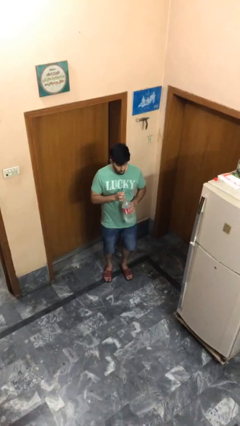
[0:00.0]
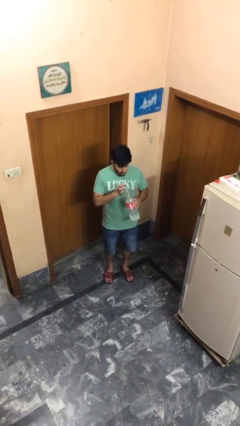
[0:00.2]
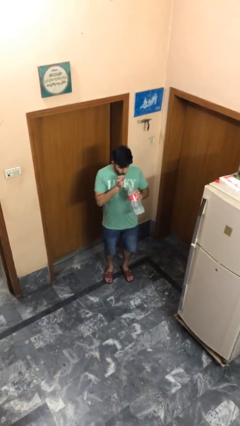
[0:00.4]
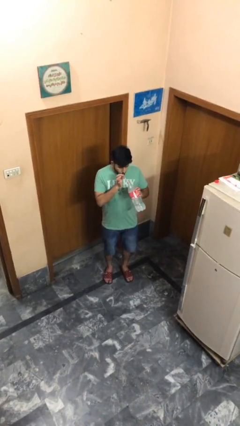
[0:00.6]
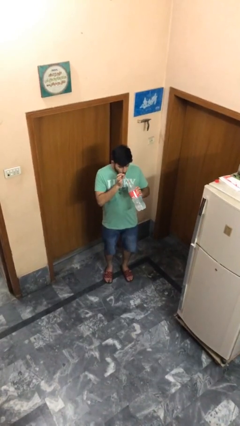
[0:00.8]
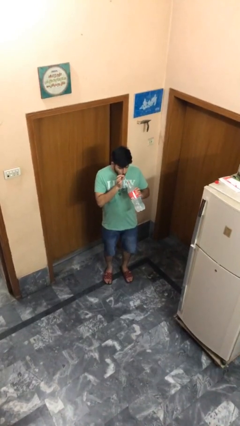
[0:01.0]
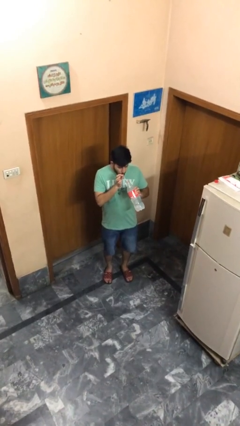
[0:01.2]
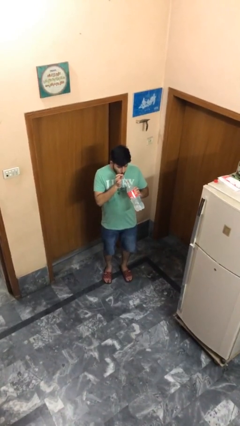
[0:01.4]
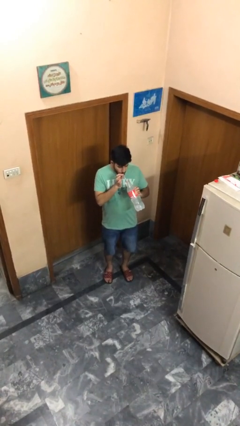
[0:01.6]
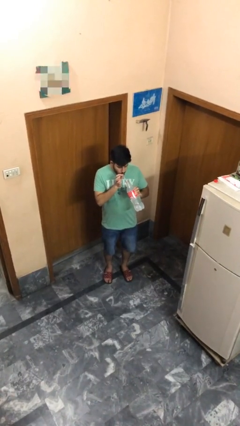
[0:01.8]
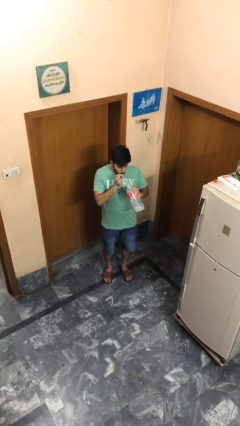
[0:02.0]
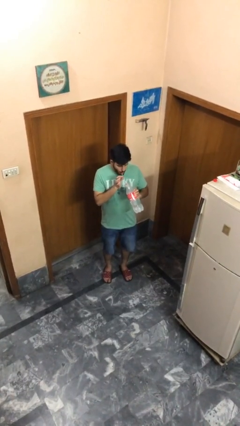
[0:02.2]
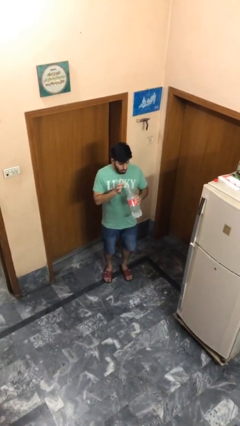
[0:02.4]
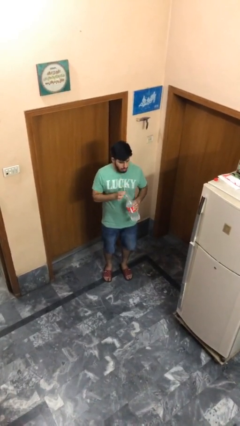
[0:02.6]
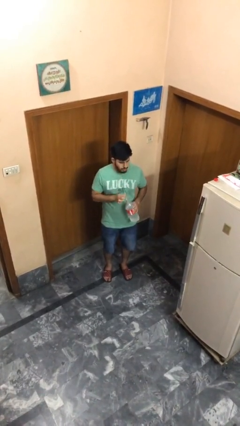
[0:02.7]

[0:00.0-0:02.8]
person drinks from straw

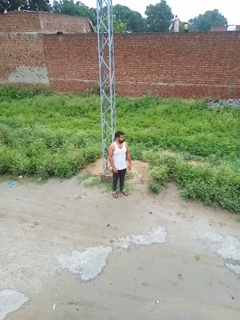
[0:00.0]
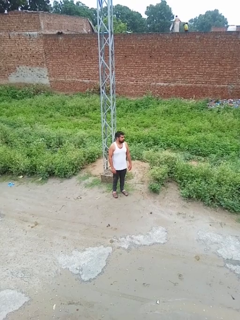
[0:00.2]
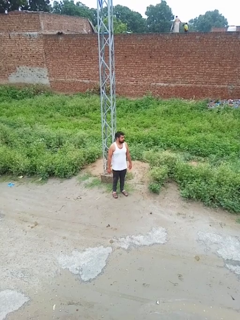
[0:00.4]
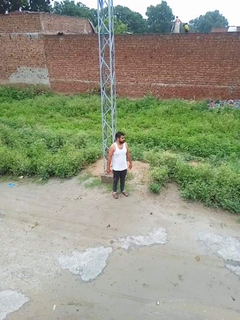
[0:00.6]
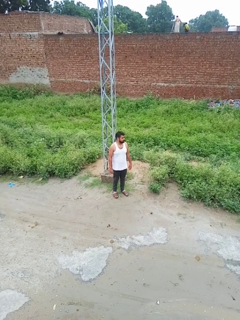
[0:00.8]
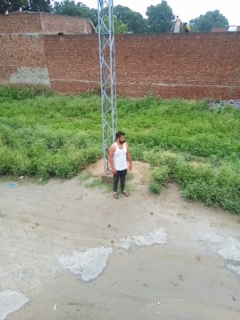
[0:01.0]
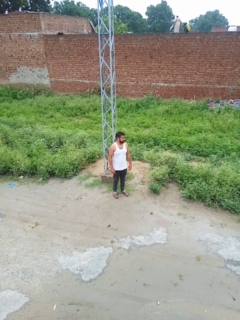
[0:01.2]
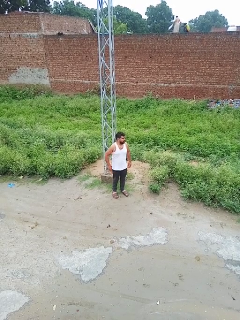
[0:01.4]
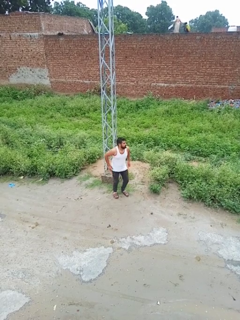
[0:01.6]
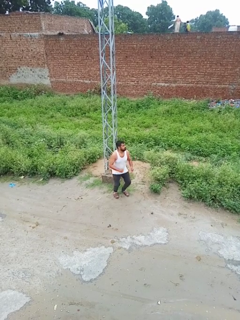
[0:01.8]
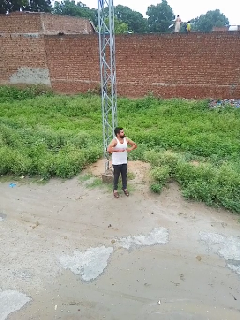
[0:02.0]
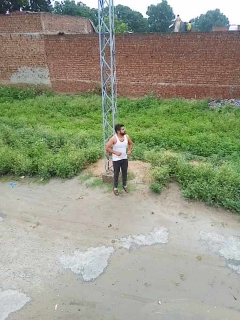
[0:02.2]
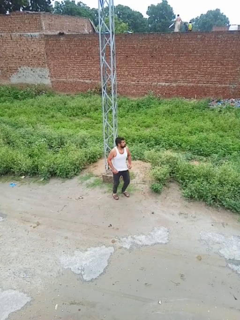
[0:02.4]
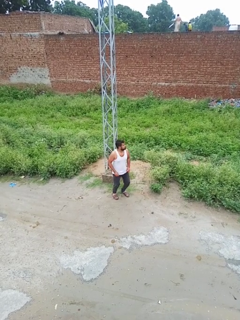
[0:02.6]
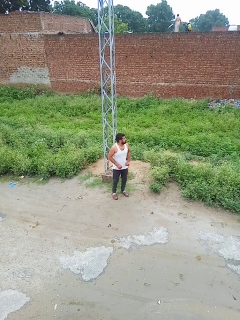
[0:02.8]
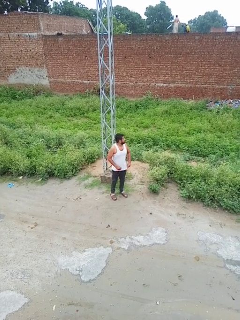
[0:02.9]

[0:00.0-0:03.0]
person jumps

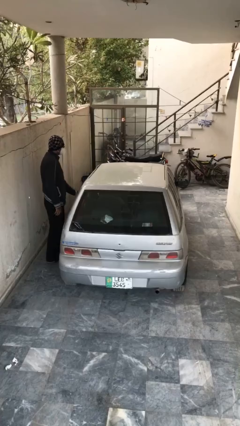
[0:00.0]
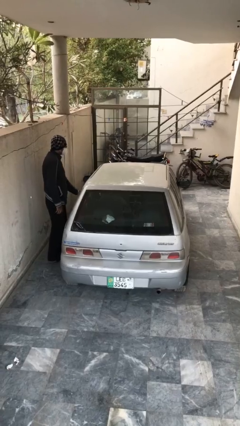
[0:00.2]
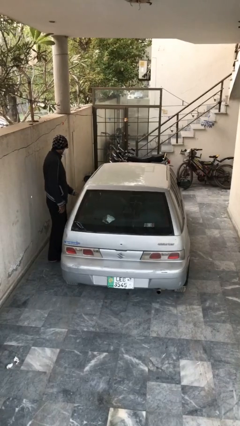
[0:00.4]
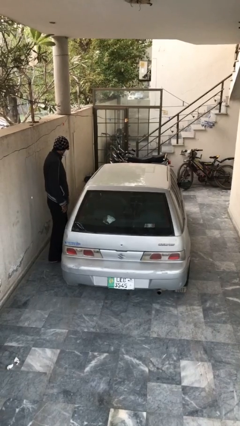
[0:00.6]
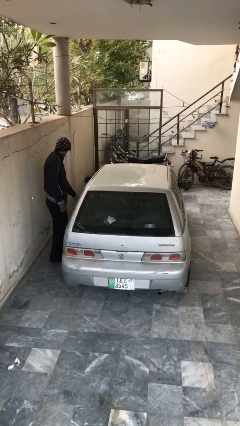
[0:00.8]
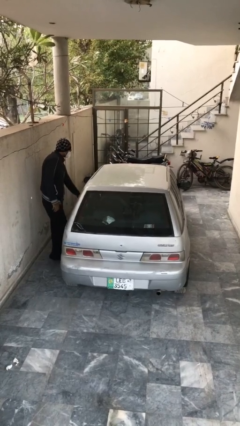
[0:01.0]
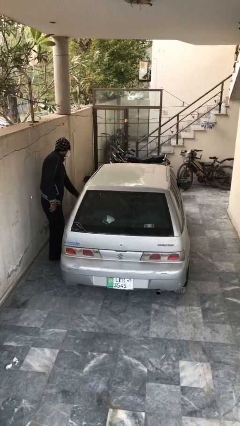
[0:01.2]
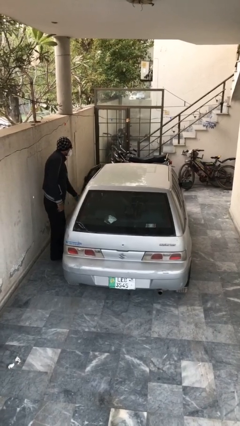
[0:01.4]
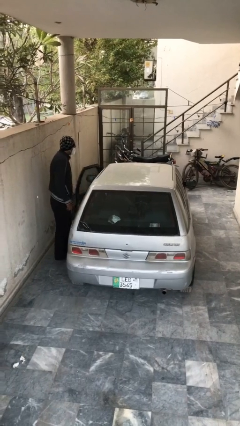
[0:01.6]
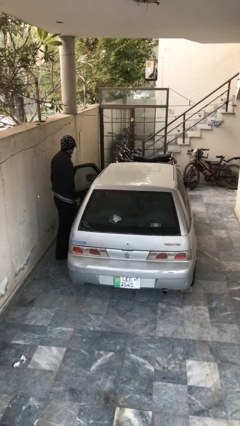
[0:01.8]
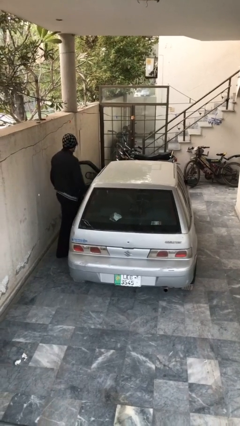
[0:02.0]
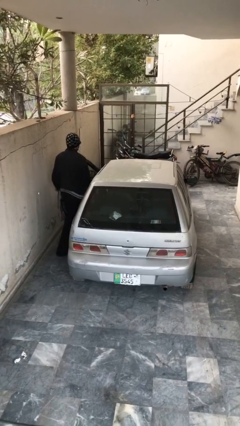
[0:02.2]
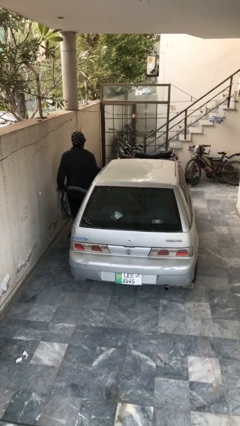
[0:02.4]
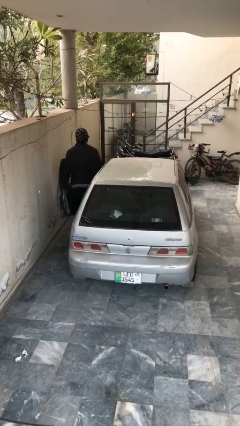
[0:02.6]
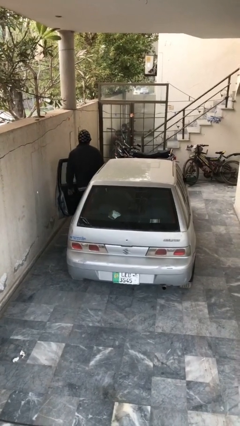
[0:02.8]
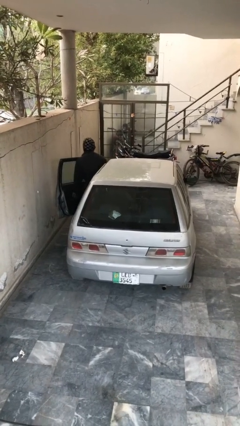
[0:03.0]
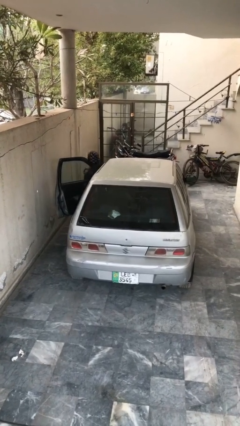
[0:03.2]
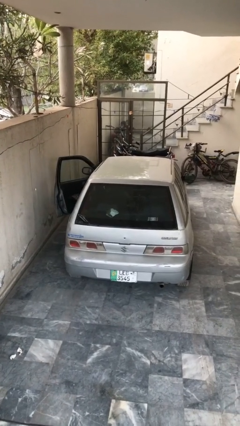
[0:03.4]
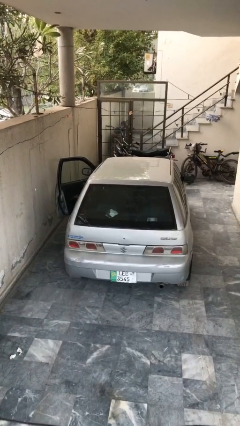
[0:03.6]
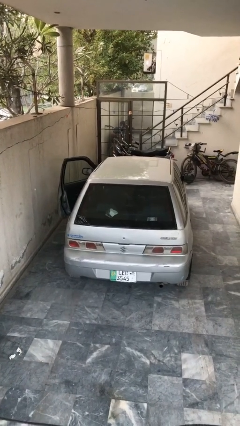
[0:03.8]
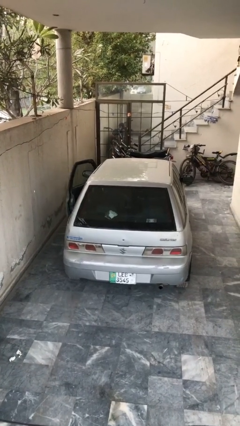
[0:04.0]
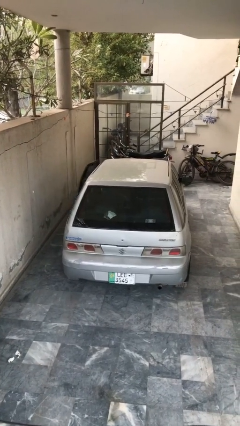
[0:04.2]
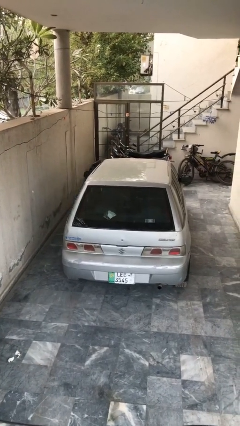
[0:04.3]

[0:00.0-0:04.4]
car picks up person

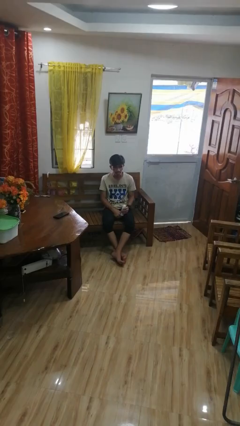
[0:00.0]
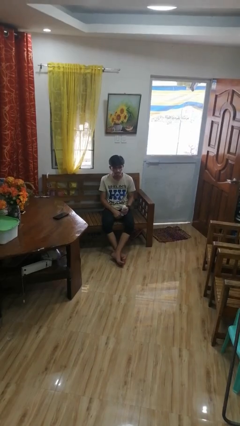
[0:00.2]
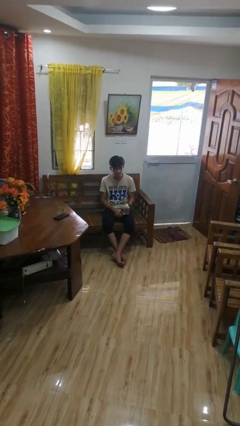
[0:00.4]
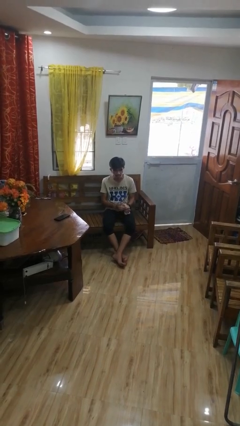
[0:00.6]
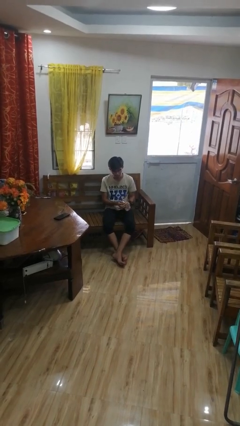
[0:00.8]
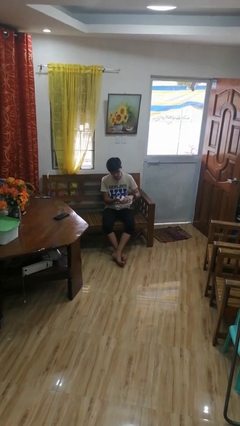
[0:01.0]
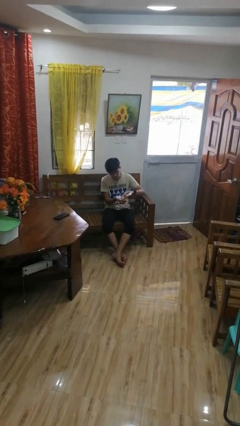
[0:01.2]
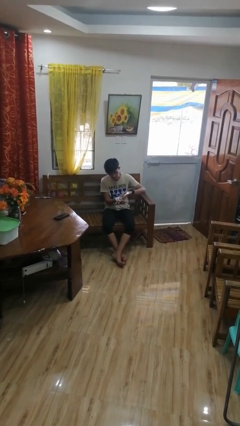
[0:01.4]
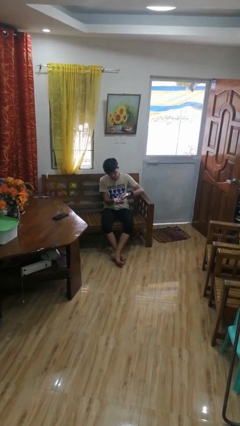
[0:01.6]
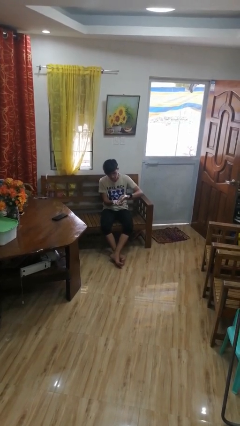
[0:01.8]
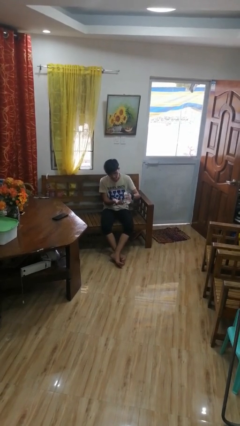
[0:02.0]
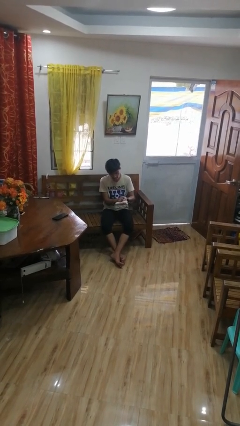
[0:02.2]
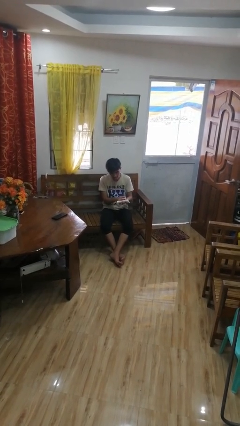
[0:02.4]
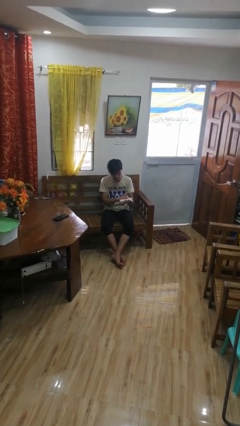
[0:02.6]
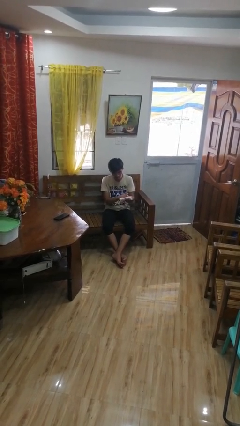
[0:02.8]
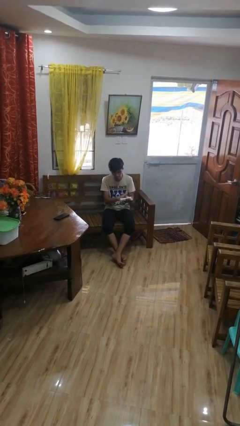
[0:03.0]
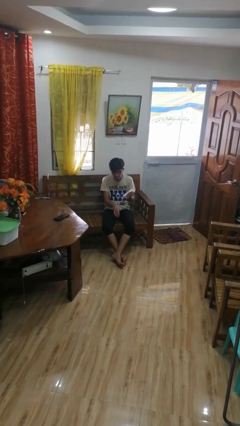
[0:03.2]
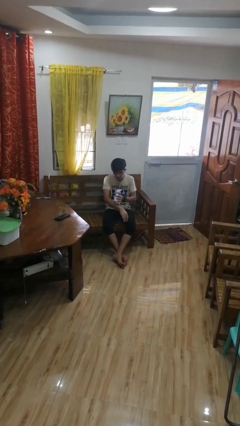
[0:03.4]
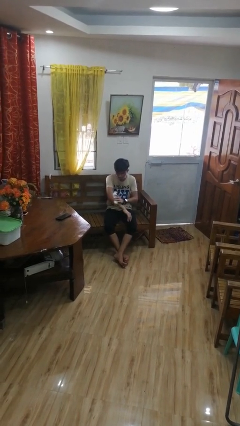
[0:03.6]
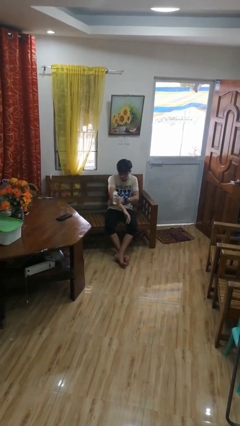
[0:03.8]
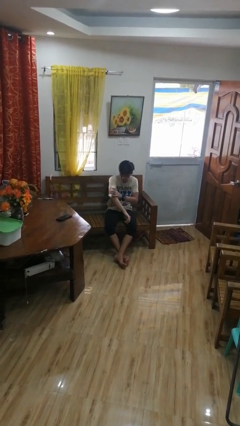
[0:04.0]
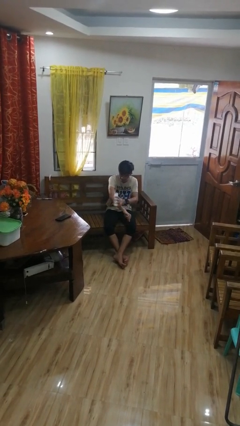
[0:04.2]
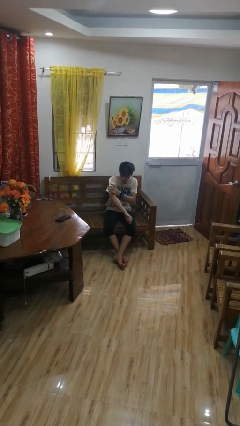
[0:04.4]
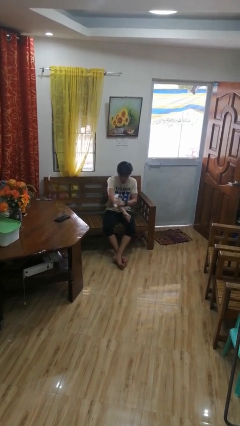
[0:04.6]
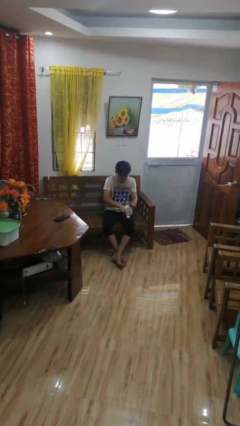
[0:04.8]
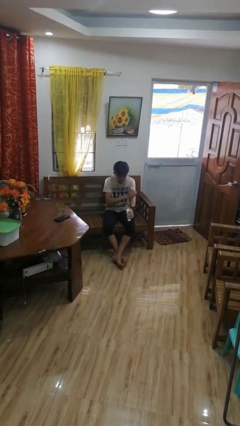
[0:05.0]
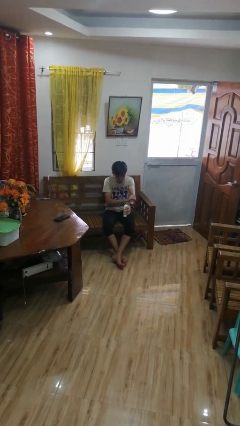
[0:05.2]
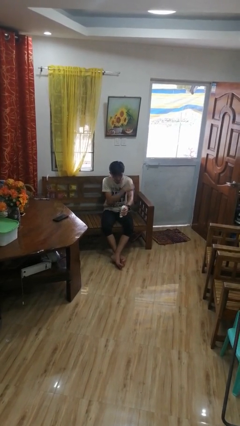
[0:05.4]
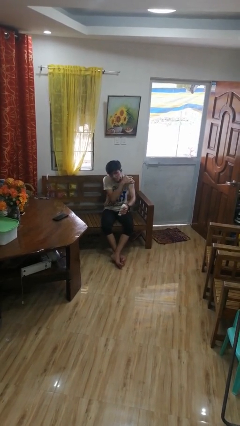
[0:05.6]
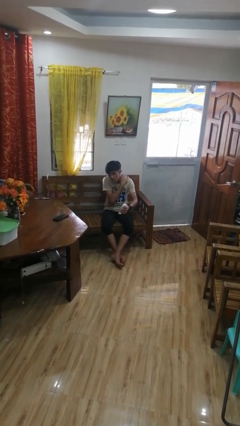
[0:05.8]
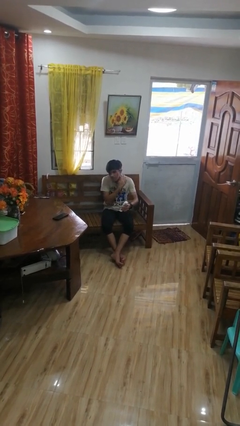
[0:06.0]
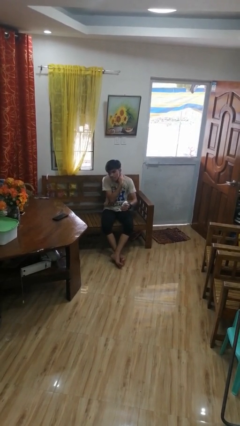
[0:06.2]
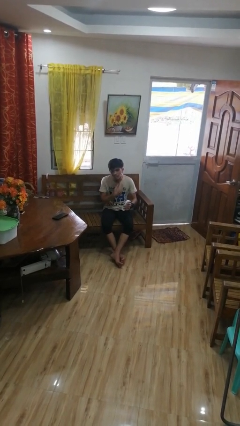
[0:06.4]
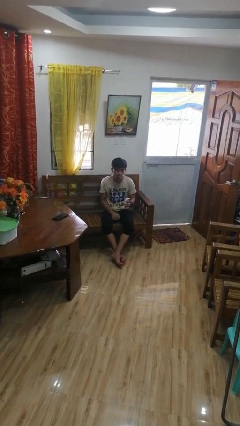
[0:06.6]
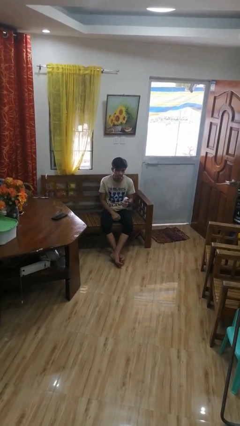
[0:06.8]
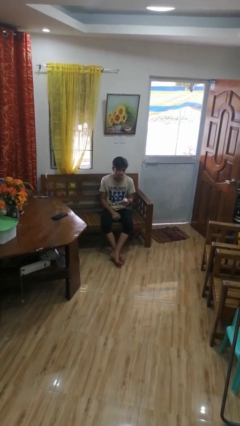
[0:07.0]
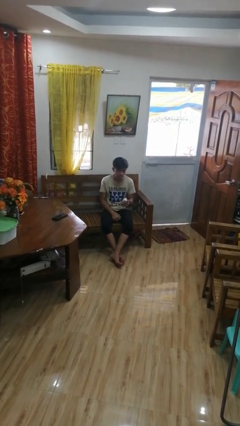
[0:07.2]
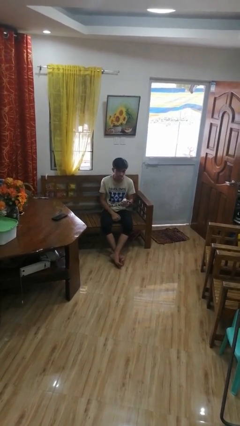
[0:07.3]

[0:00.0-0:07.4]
person applies sunscreen

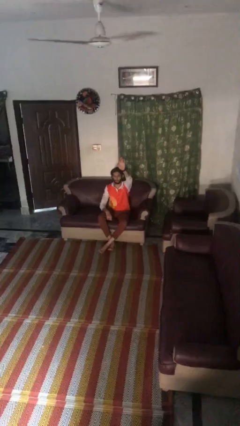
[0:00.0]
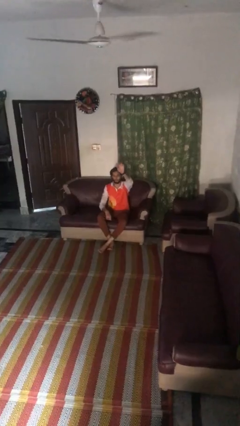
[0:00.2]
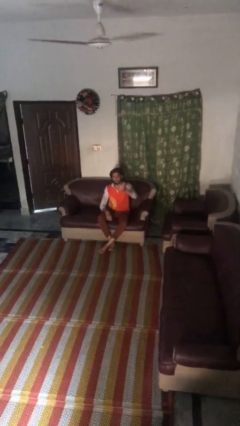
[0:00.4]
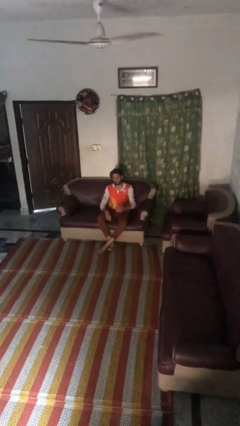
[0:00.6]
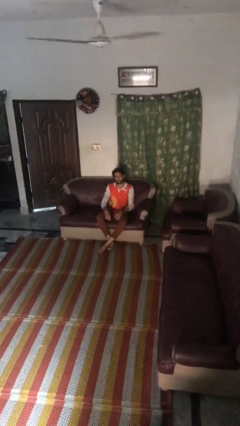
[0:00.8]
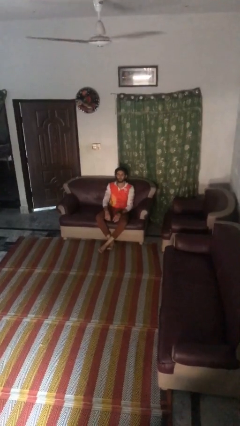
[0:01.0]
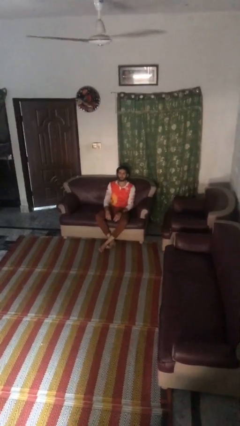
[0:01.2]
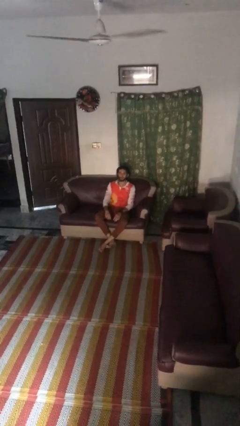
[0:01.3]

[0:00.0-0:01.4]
person gestures lower hand
